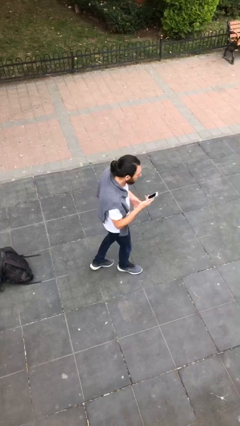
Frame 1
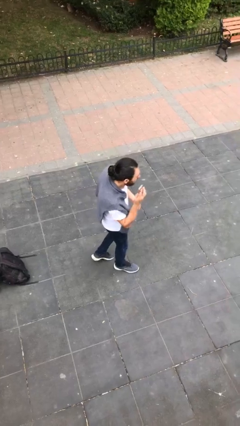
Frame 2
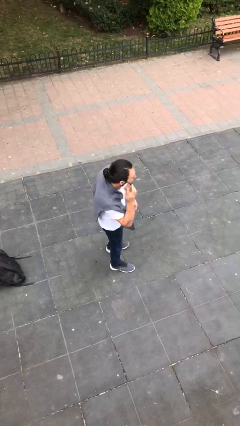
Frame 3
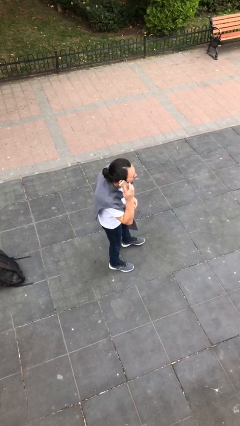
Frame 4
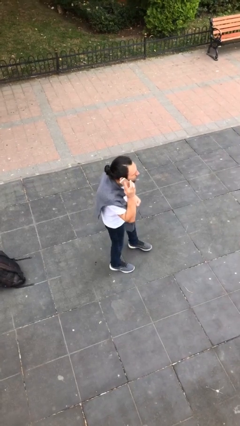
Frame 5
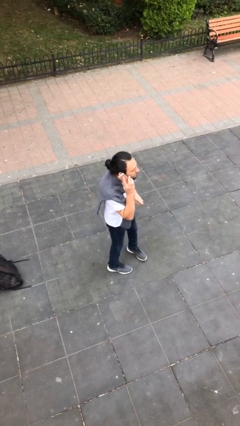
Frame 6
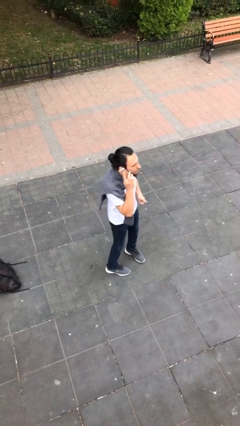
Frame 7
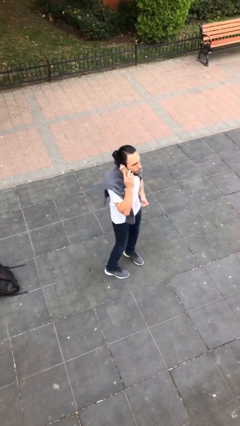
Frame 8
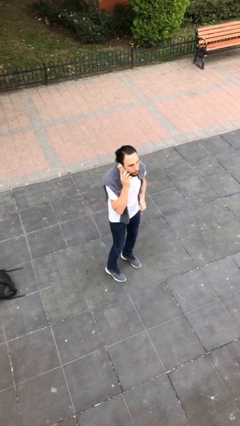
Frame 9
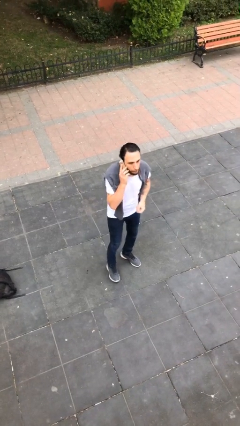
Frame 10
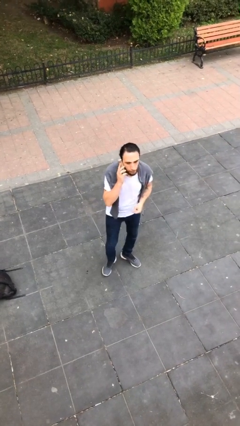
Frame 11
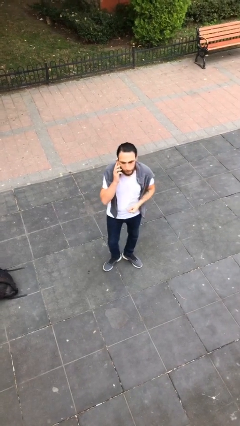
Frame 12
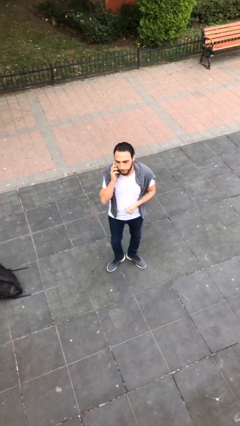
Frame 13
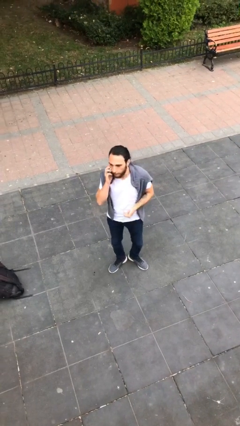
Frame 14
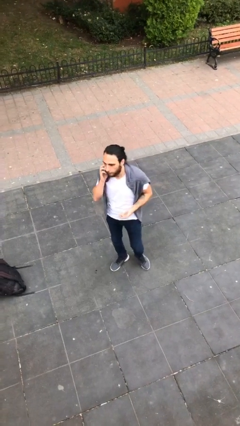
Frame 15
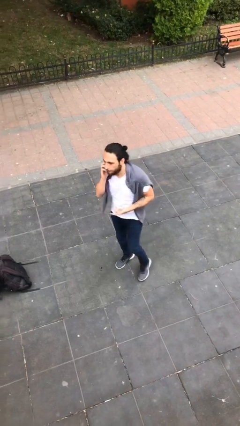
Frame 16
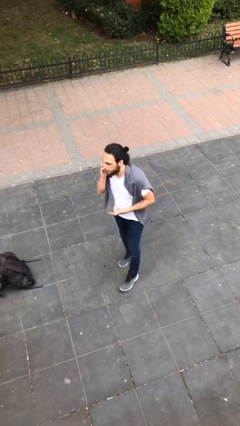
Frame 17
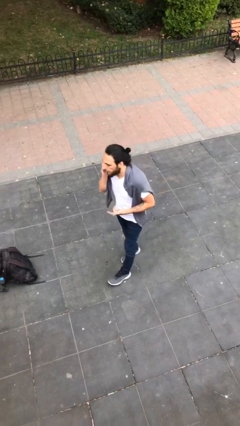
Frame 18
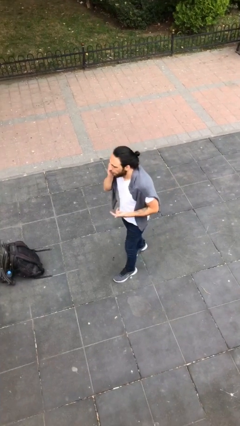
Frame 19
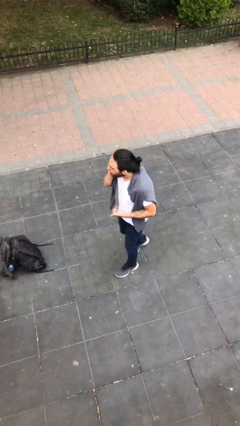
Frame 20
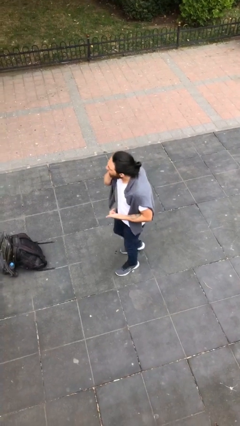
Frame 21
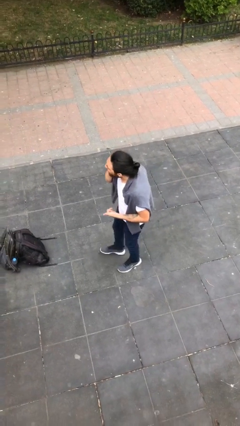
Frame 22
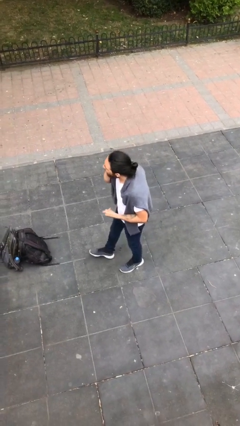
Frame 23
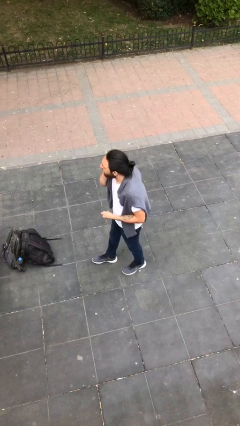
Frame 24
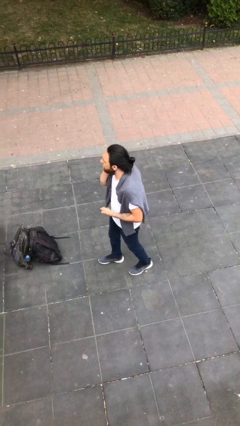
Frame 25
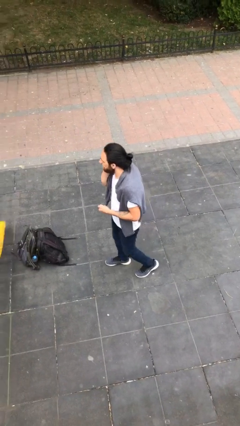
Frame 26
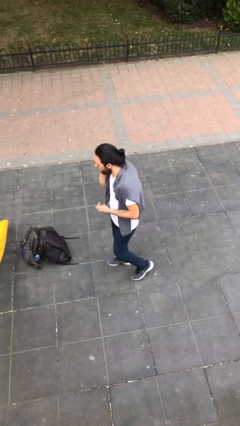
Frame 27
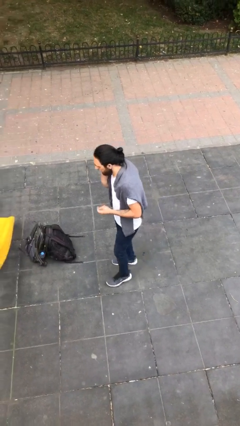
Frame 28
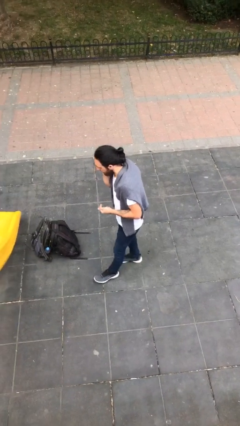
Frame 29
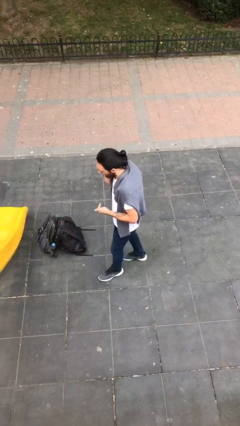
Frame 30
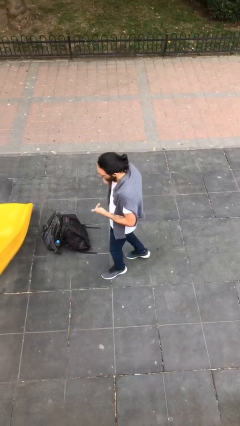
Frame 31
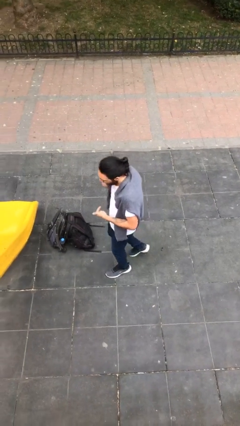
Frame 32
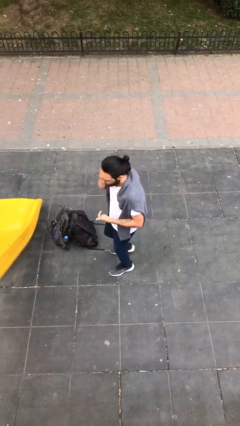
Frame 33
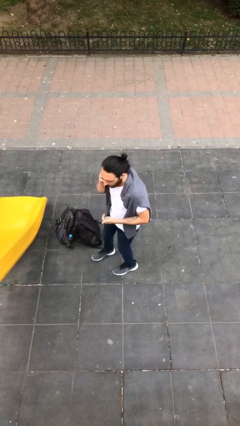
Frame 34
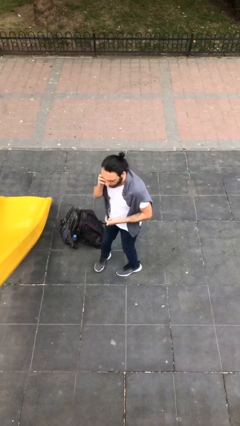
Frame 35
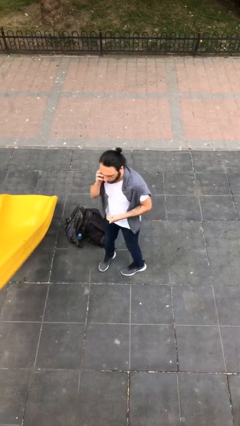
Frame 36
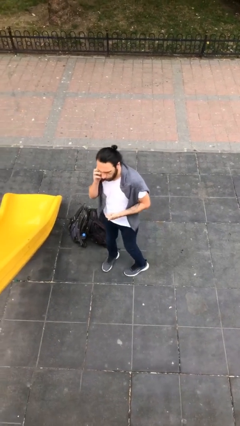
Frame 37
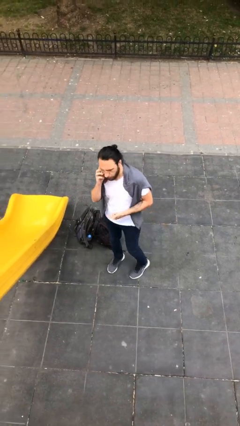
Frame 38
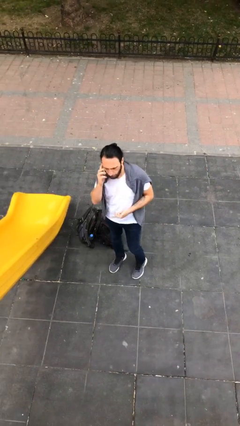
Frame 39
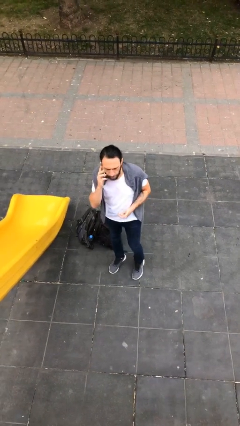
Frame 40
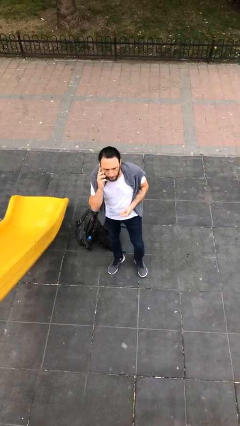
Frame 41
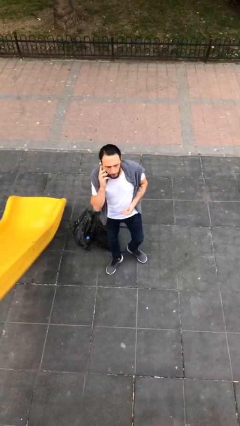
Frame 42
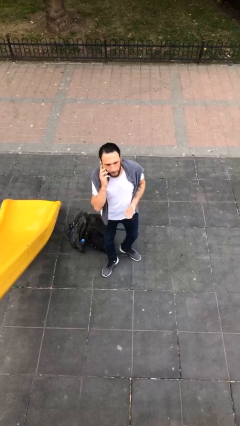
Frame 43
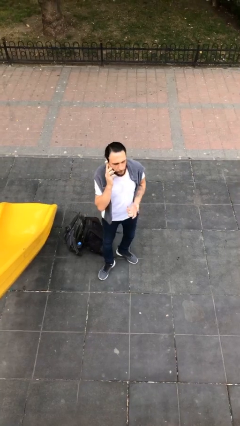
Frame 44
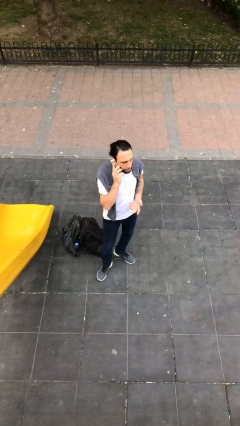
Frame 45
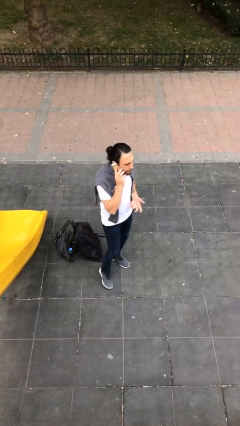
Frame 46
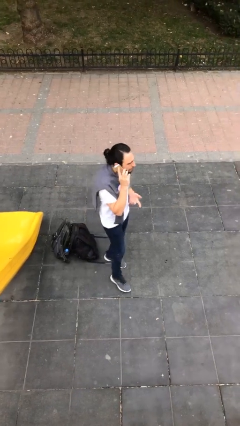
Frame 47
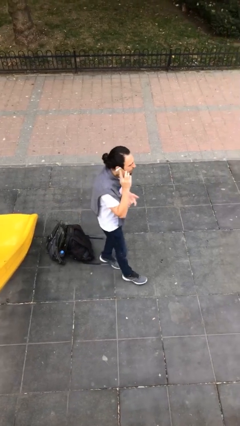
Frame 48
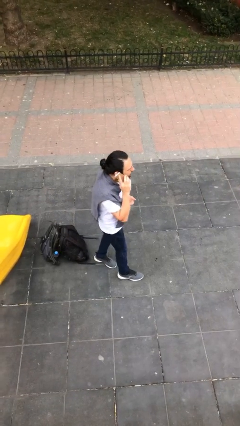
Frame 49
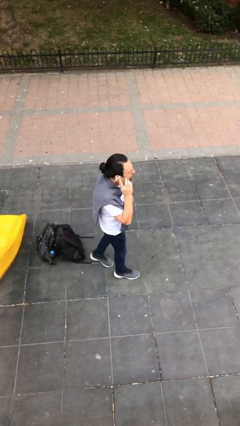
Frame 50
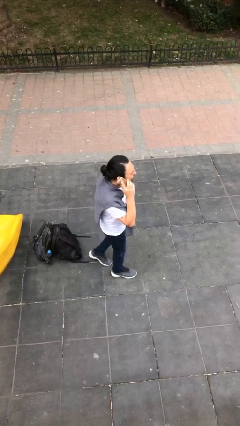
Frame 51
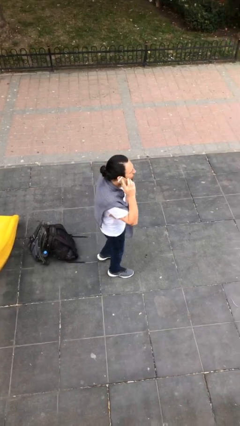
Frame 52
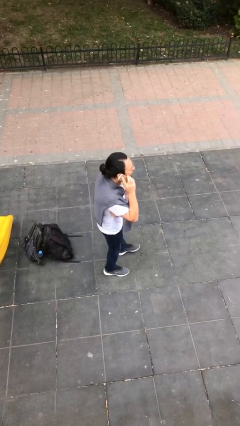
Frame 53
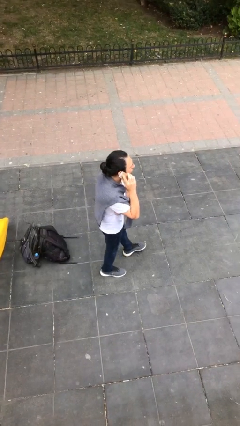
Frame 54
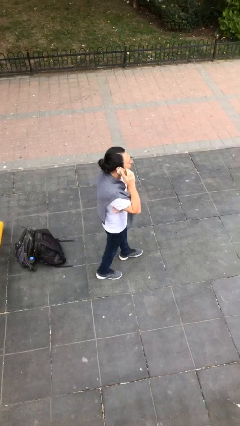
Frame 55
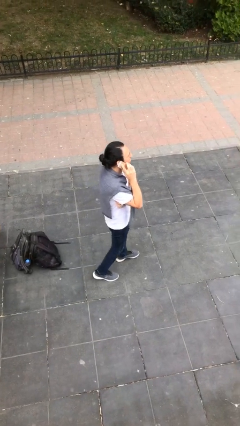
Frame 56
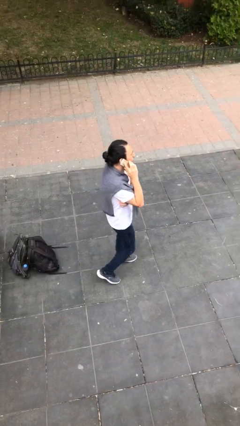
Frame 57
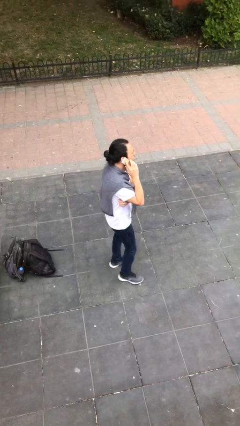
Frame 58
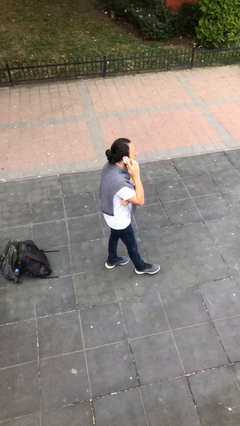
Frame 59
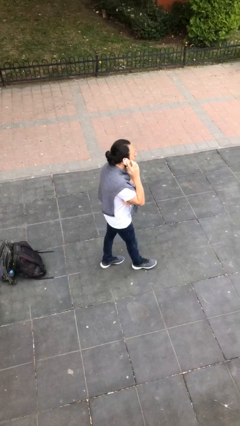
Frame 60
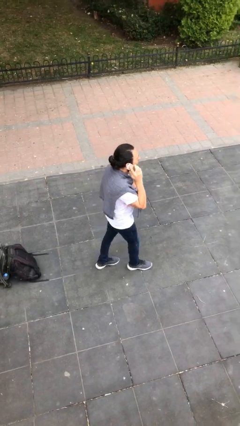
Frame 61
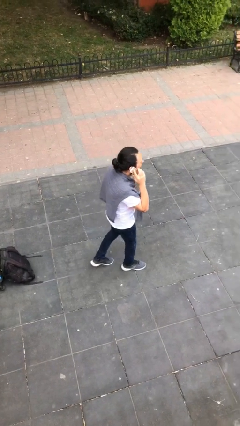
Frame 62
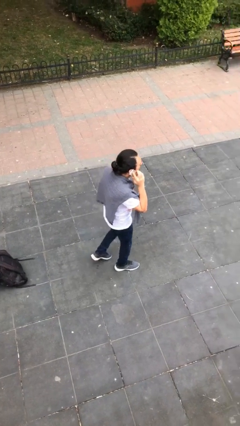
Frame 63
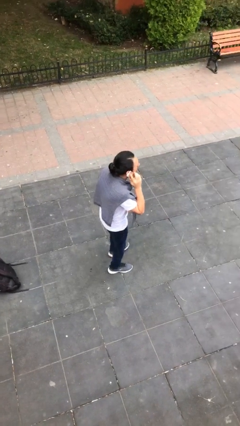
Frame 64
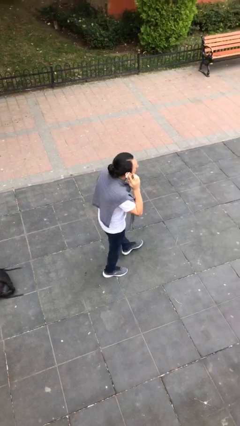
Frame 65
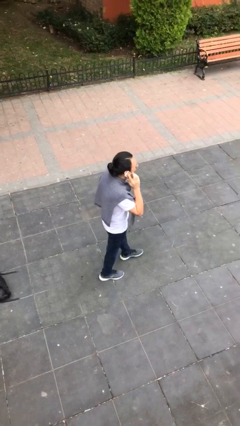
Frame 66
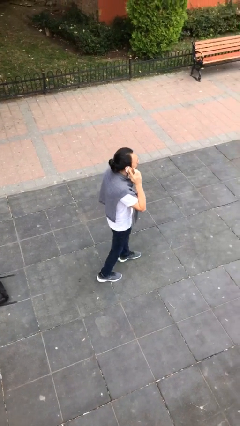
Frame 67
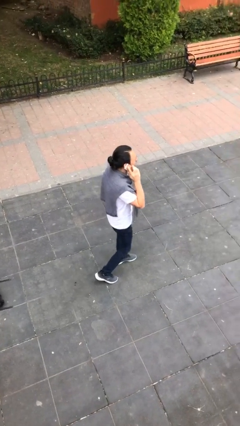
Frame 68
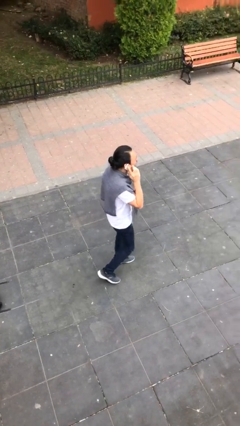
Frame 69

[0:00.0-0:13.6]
person talks on phone

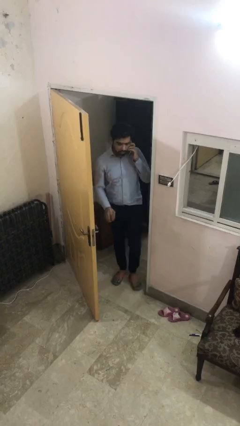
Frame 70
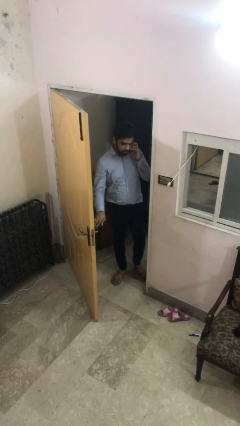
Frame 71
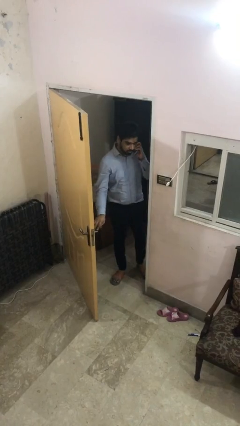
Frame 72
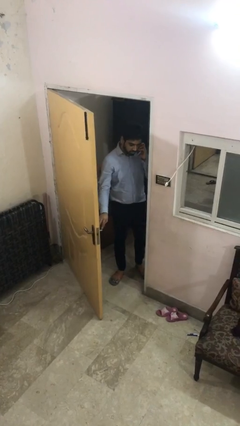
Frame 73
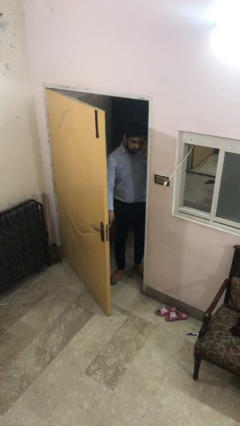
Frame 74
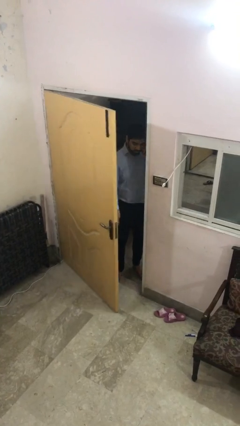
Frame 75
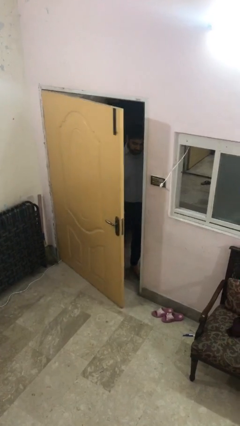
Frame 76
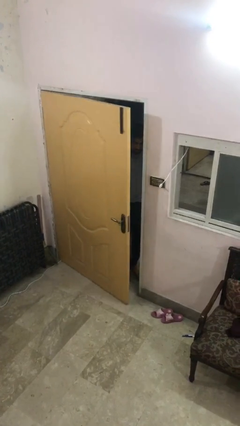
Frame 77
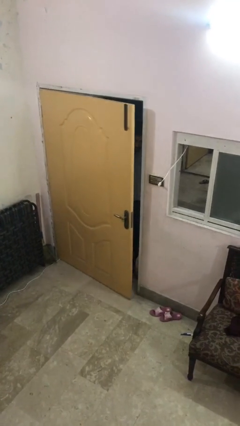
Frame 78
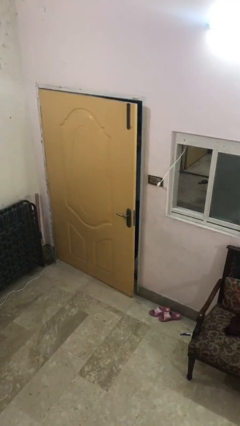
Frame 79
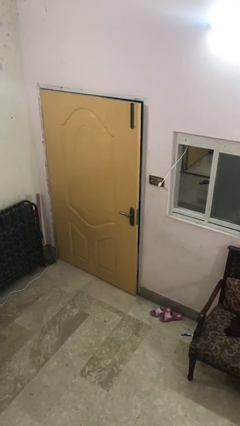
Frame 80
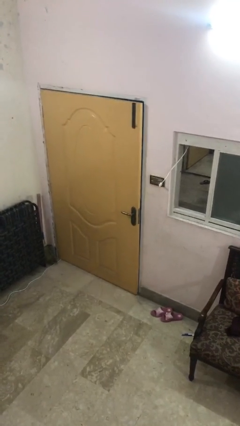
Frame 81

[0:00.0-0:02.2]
person closes facility door

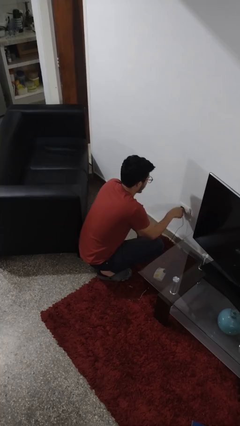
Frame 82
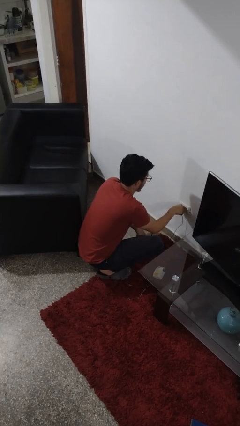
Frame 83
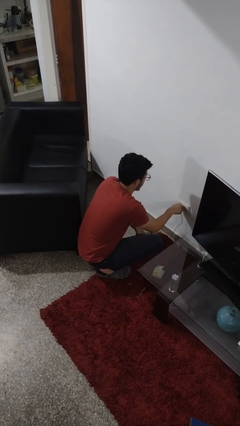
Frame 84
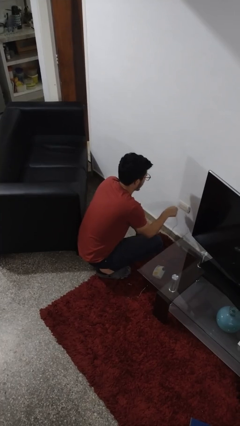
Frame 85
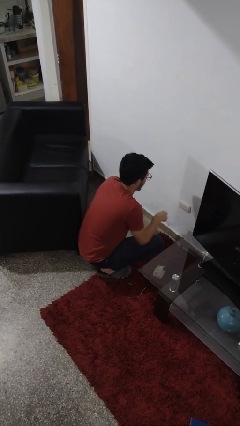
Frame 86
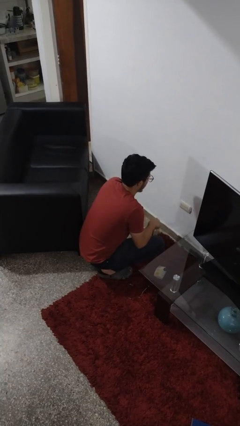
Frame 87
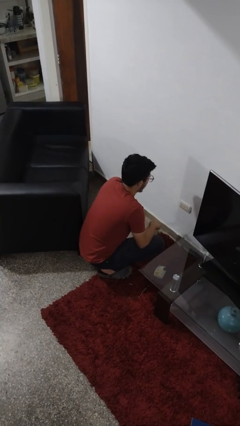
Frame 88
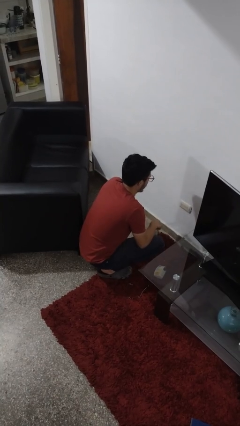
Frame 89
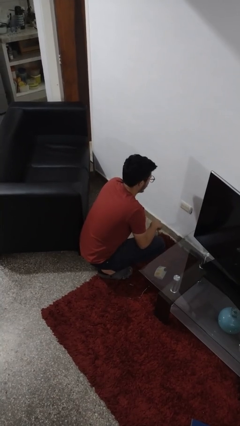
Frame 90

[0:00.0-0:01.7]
person unplugs from electrical socket

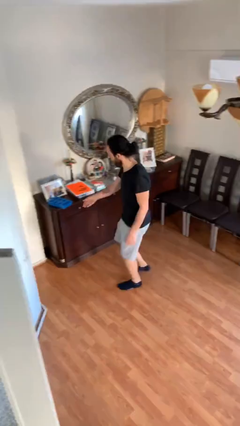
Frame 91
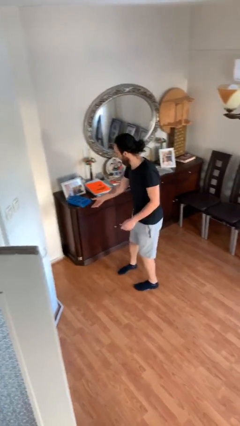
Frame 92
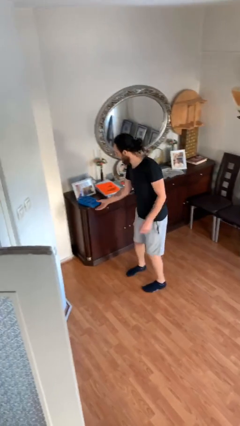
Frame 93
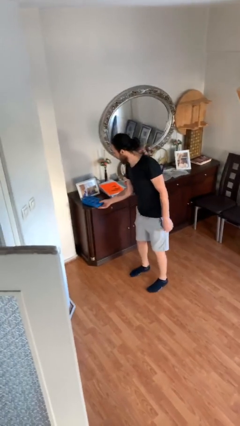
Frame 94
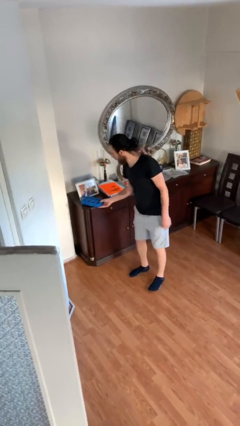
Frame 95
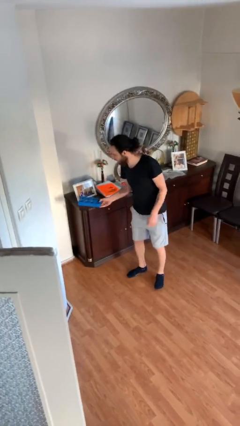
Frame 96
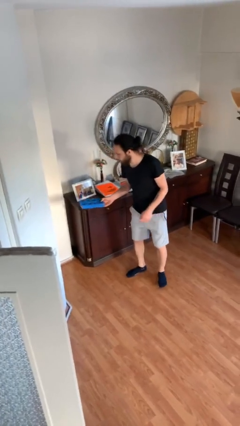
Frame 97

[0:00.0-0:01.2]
person picks up object from table
